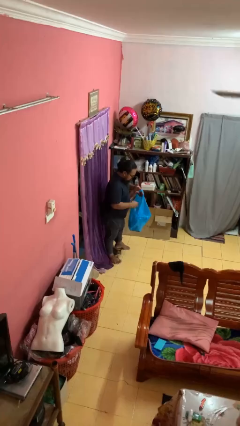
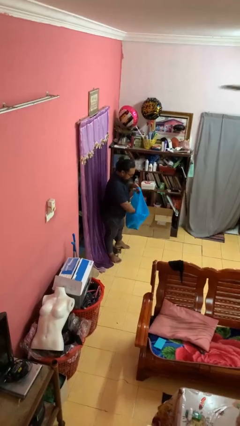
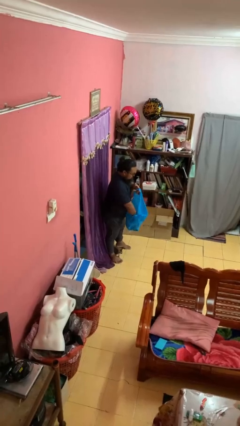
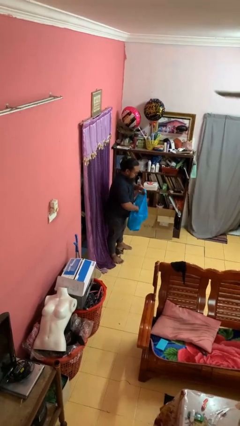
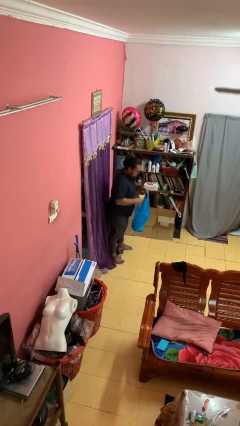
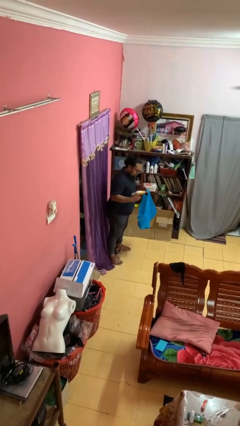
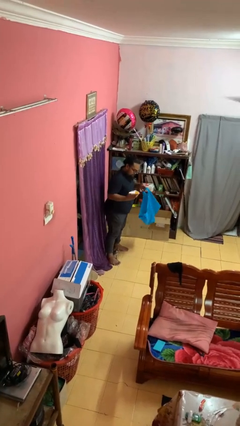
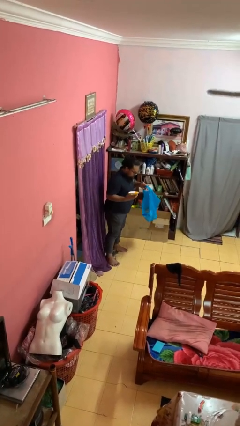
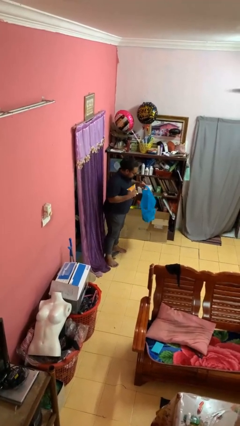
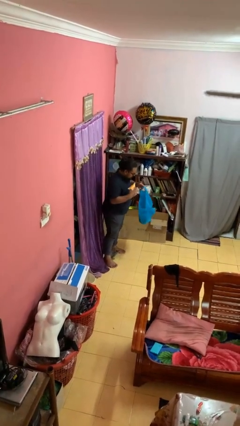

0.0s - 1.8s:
person takes object from bag

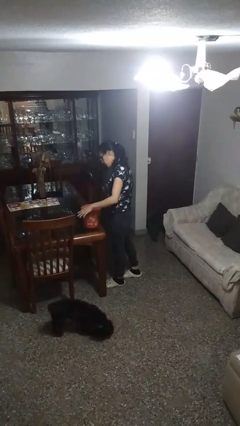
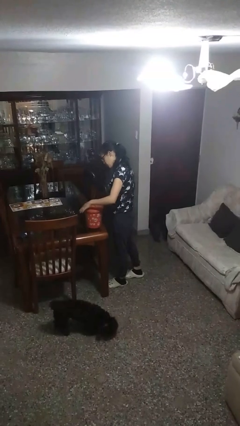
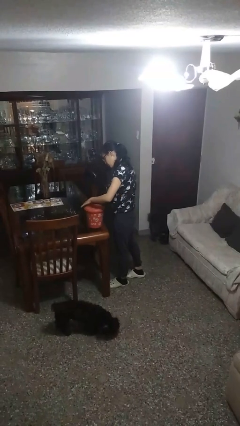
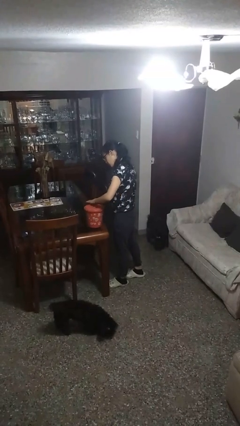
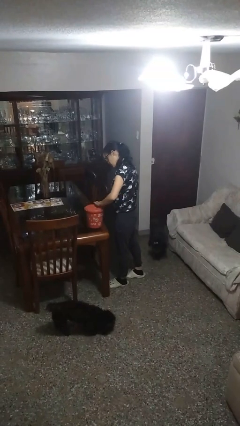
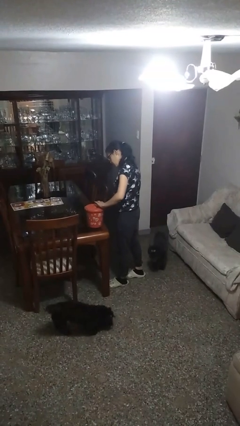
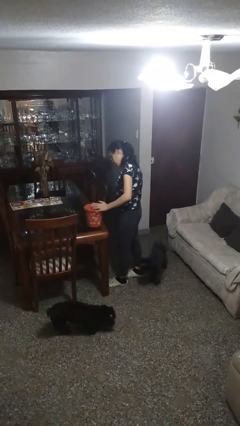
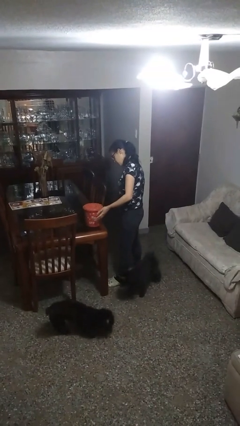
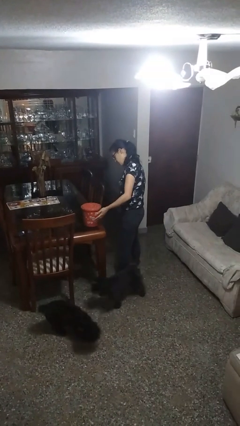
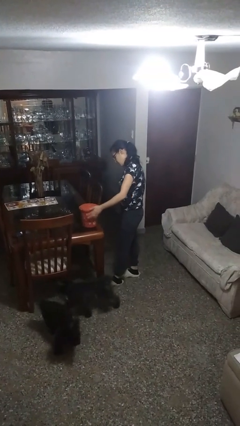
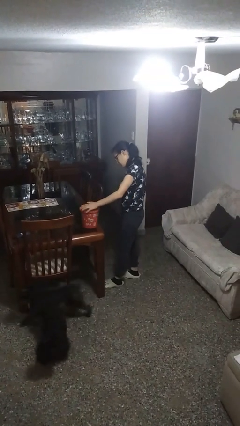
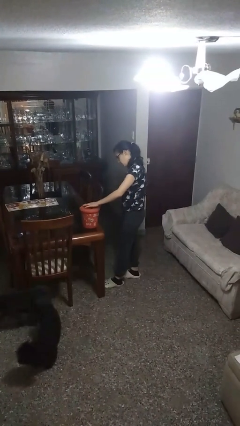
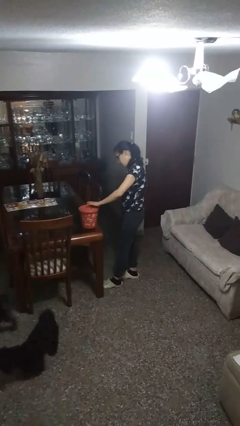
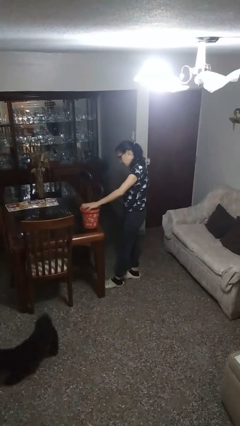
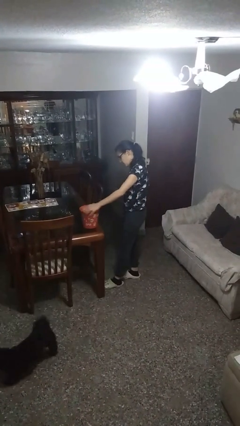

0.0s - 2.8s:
person waves hand over object

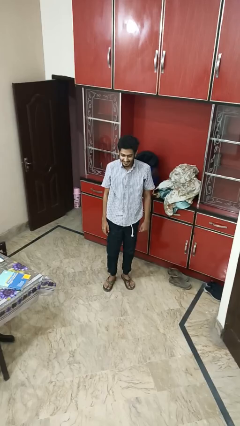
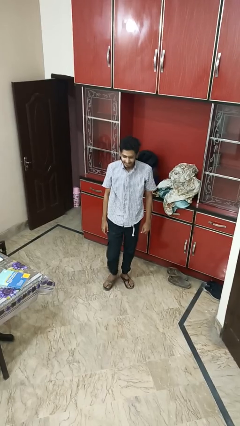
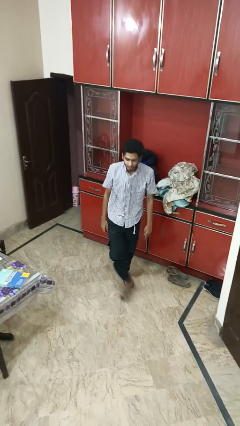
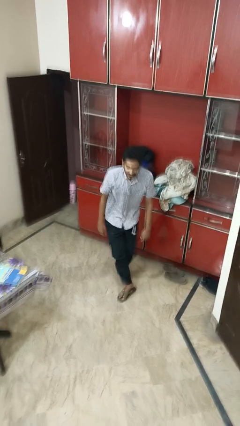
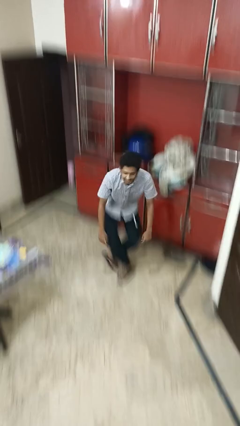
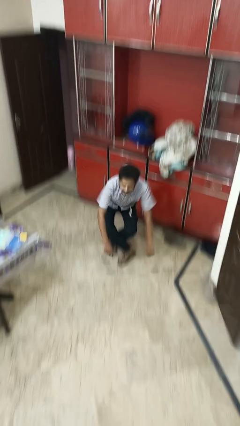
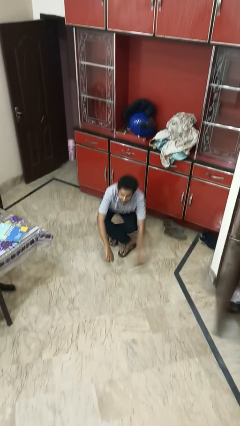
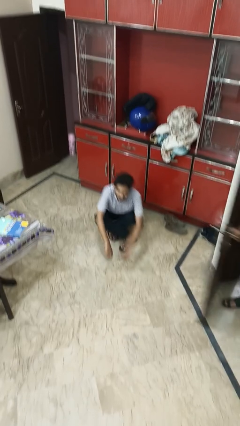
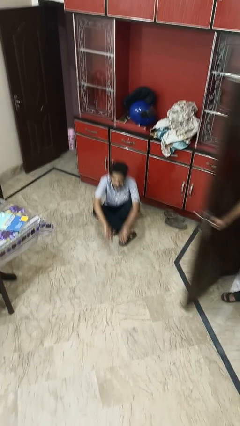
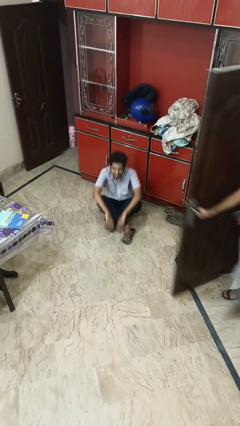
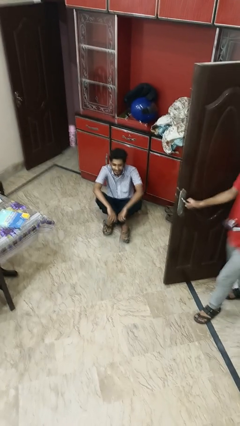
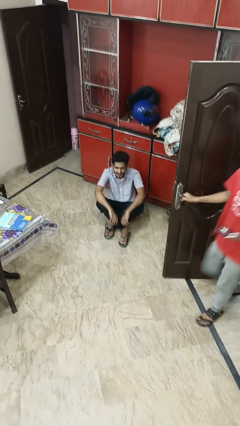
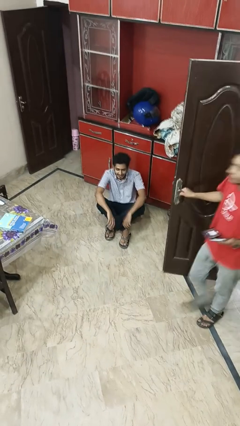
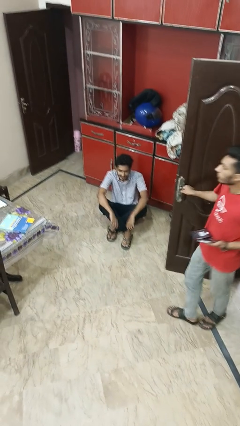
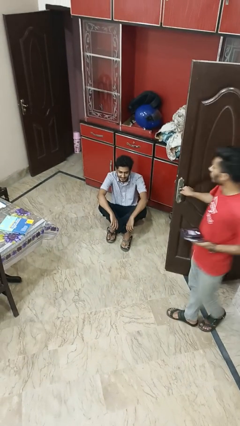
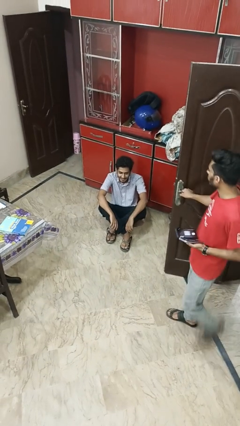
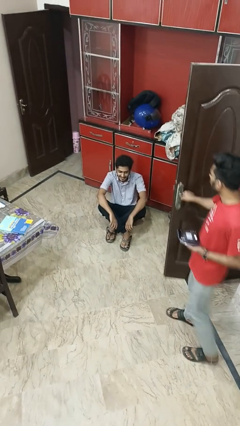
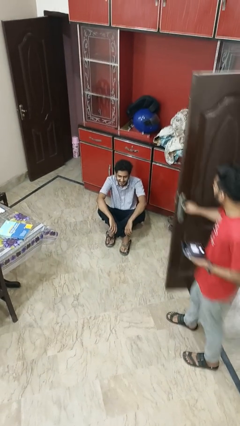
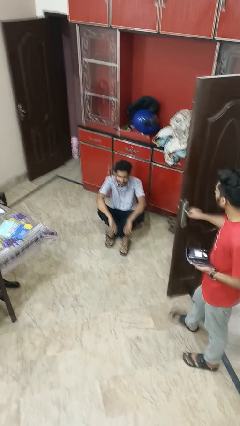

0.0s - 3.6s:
person sits crisscross

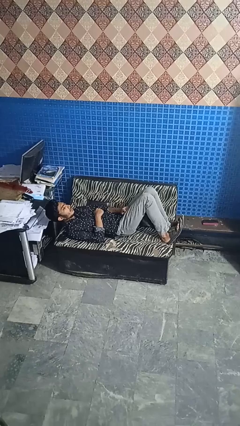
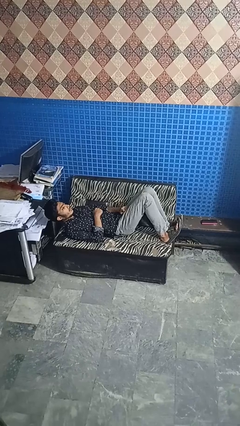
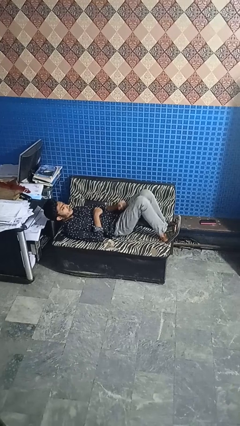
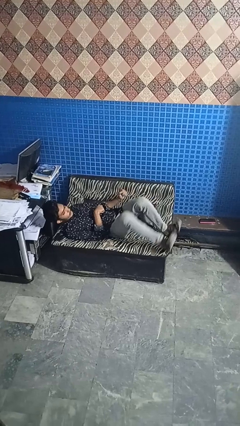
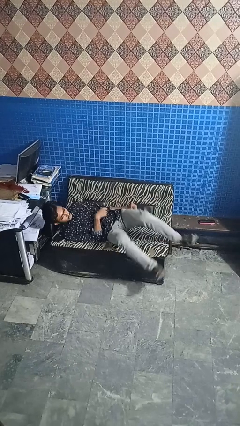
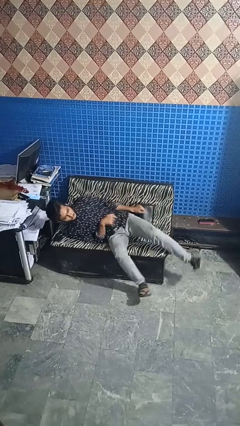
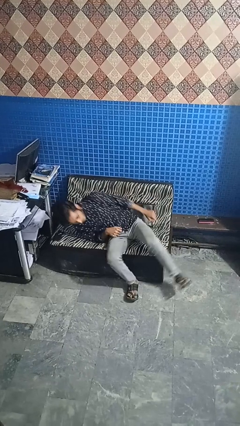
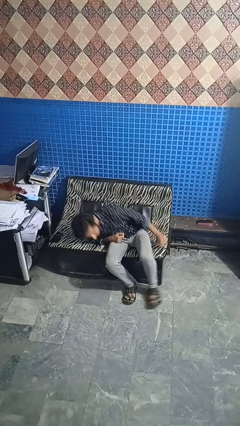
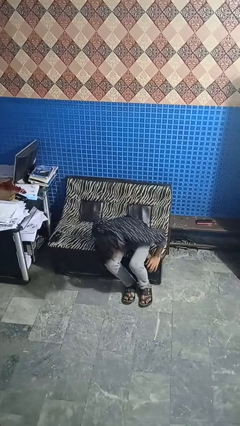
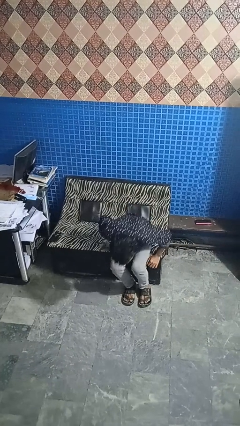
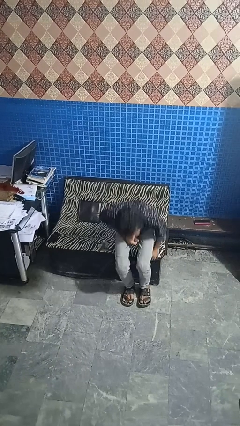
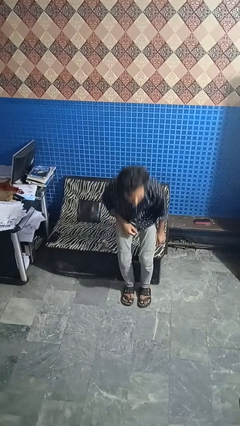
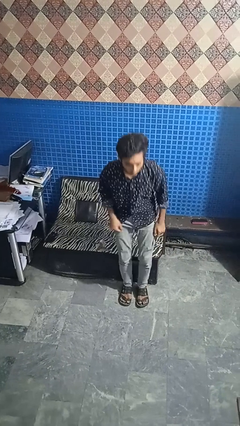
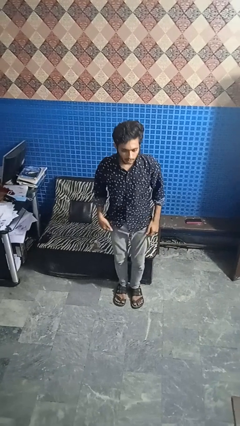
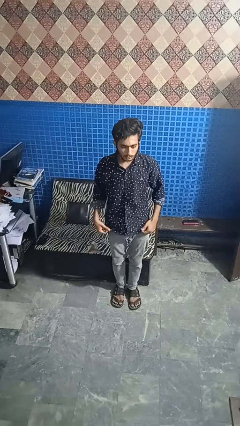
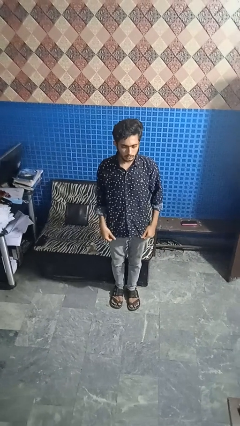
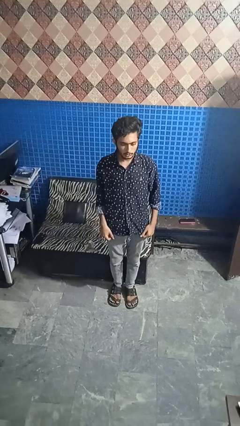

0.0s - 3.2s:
person stands up

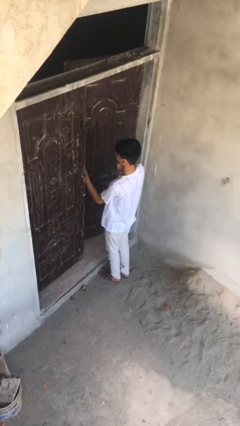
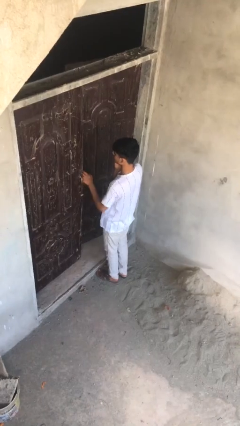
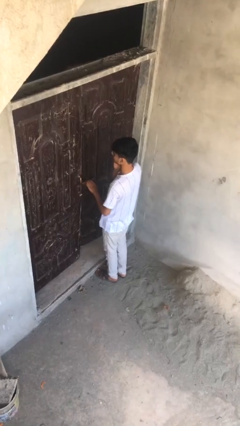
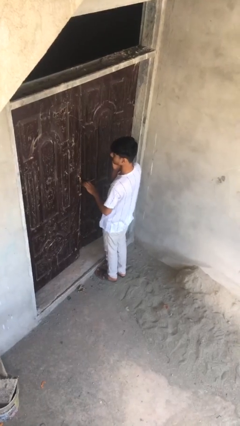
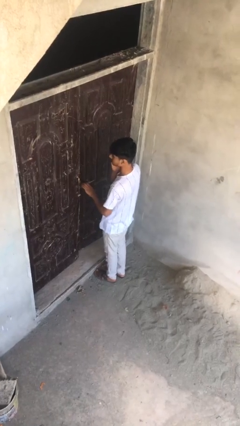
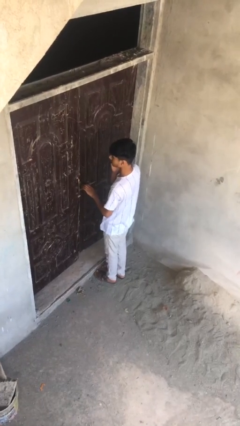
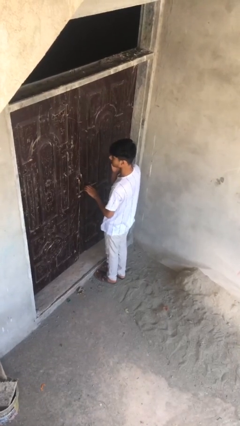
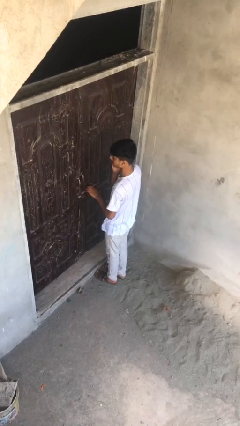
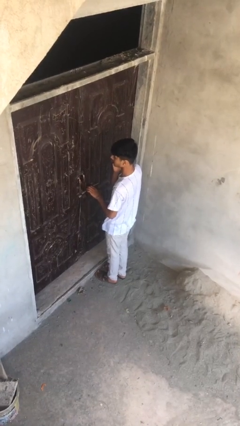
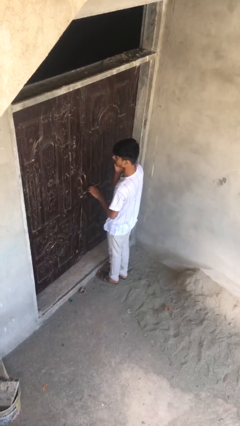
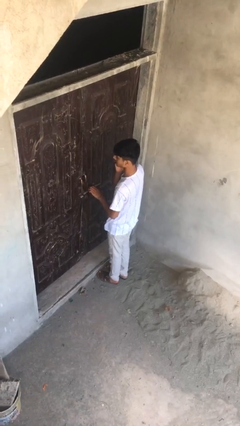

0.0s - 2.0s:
person closes facility door

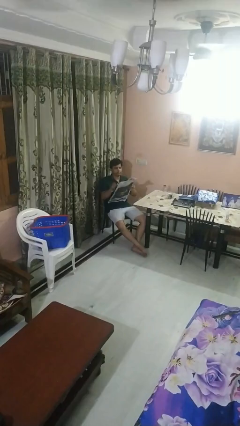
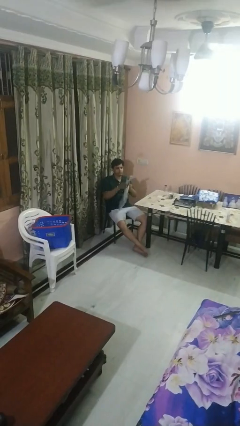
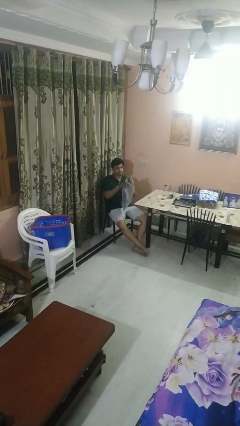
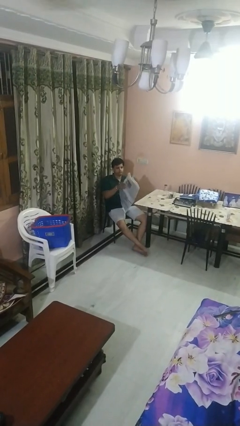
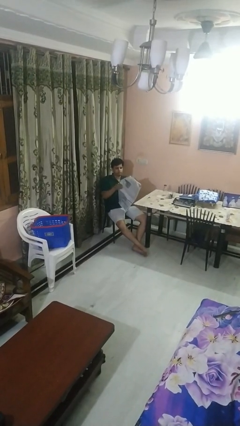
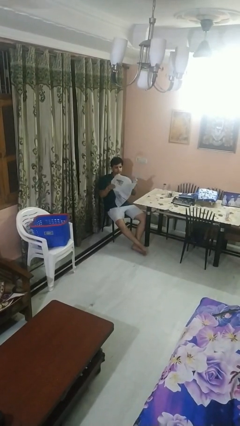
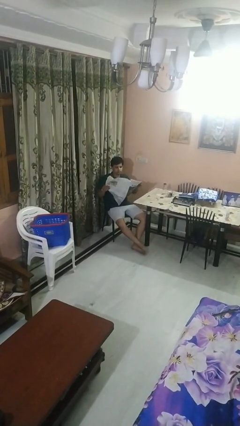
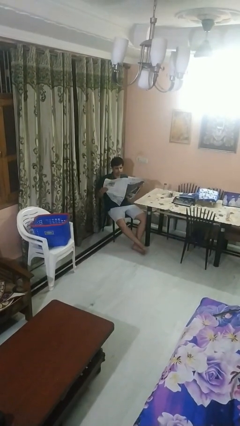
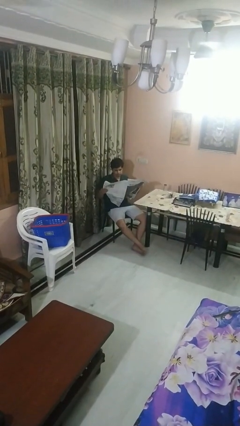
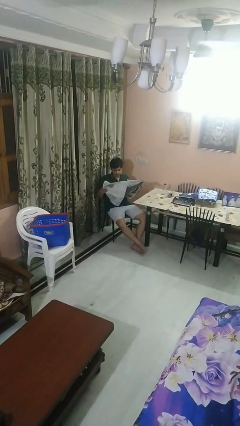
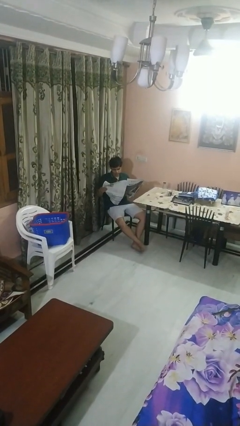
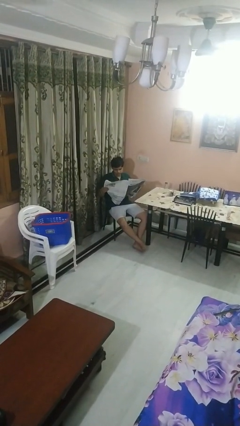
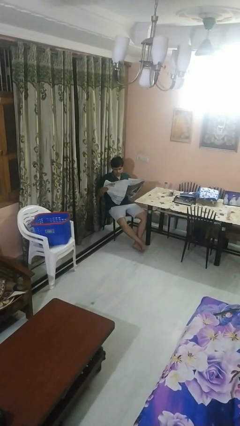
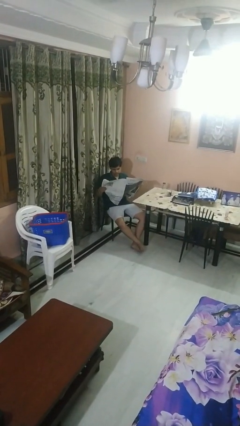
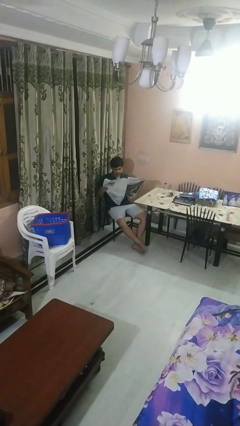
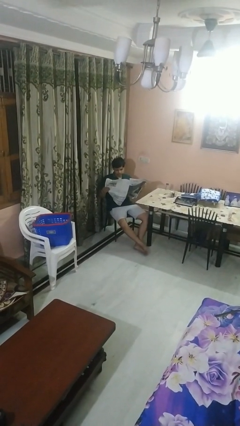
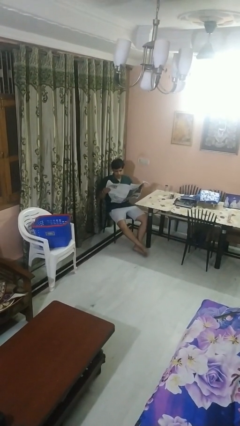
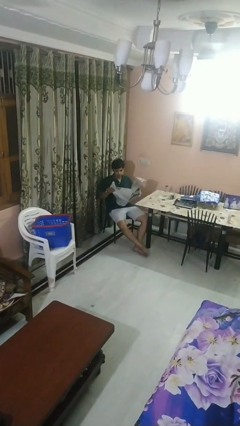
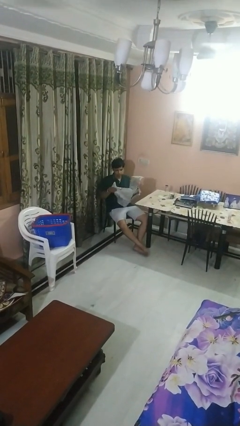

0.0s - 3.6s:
person reads newspaper

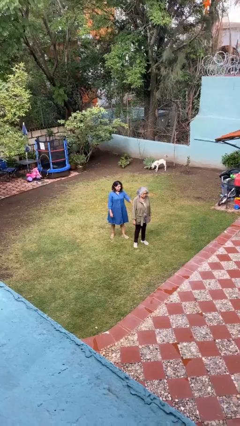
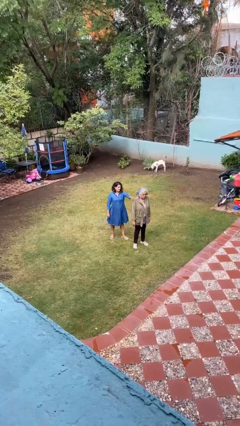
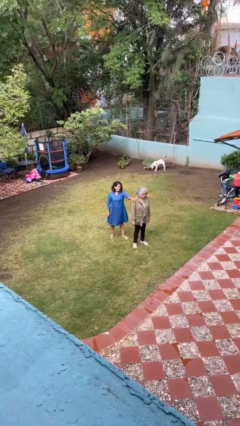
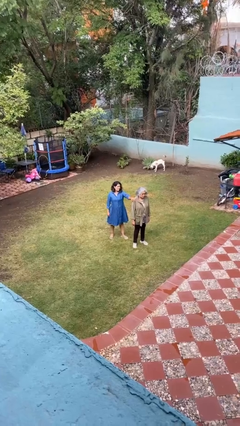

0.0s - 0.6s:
person grabs person by shoulder
